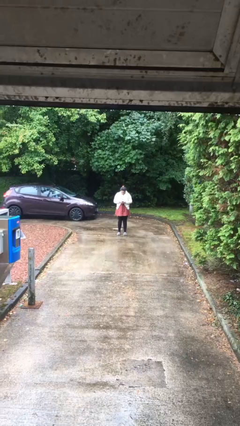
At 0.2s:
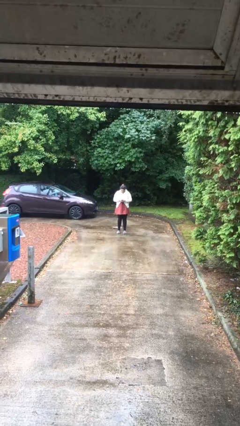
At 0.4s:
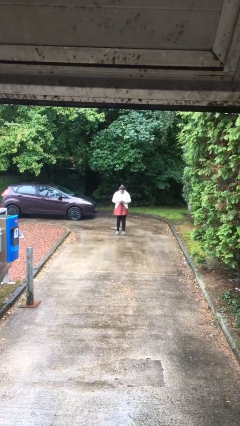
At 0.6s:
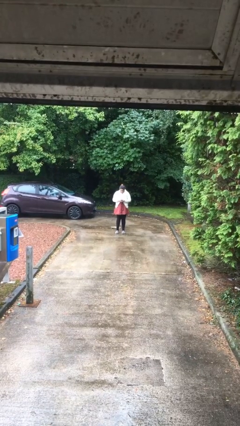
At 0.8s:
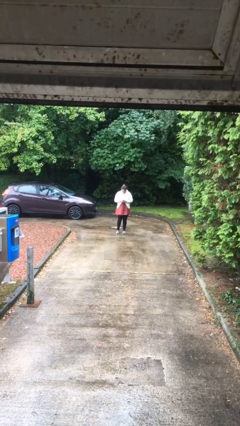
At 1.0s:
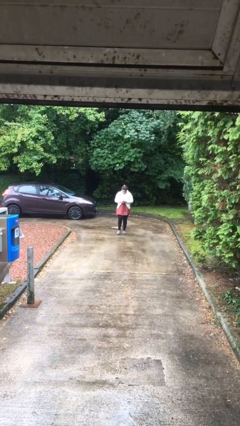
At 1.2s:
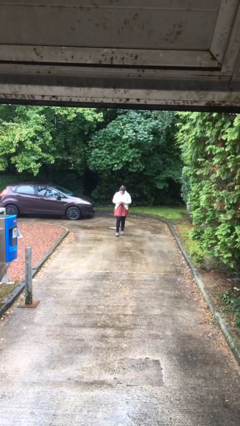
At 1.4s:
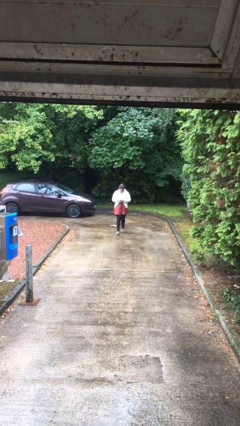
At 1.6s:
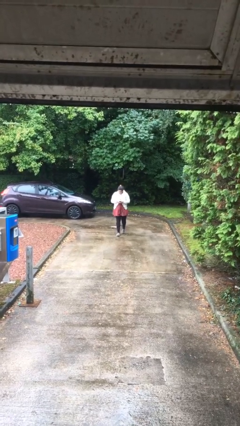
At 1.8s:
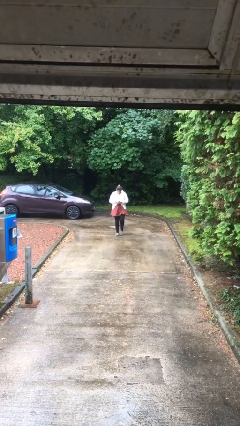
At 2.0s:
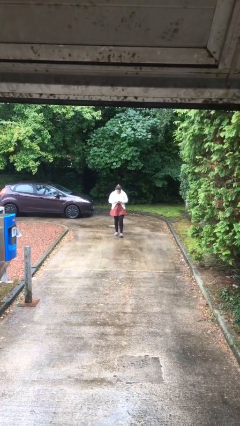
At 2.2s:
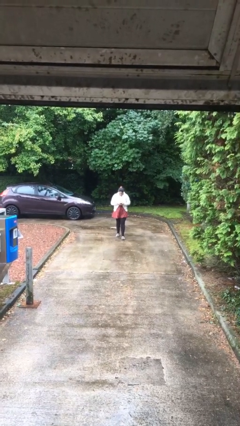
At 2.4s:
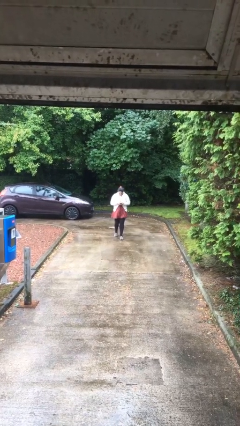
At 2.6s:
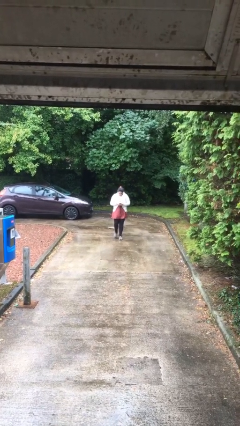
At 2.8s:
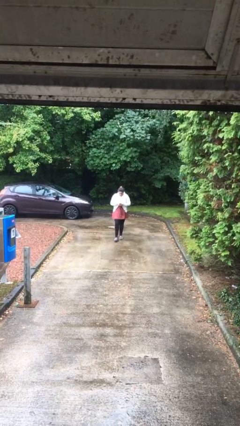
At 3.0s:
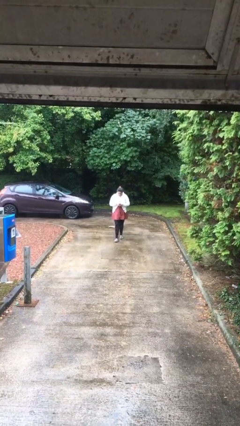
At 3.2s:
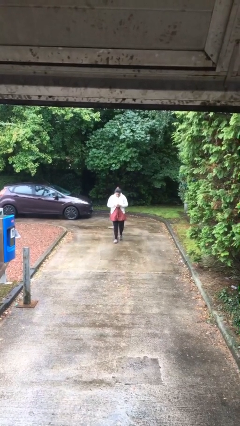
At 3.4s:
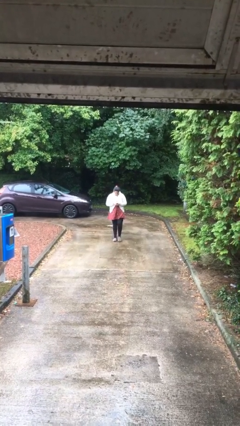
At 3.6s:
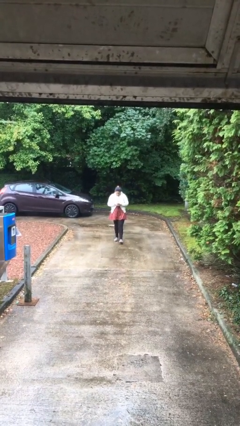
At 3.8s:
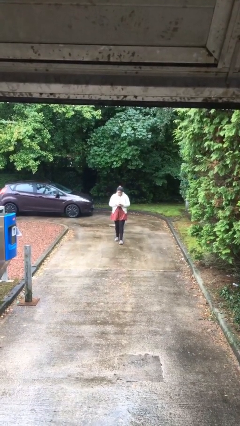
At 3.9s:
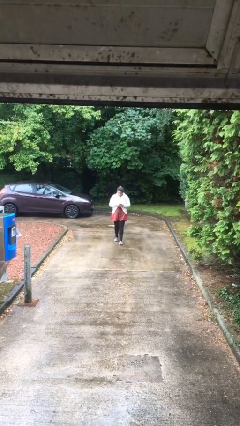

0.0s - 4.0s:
person texts on phone

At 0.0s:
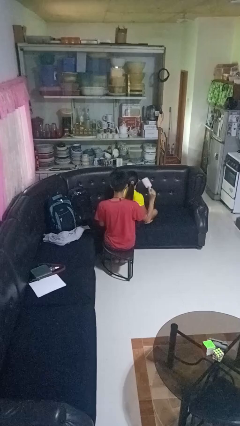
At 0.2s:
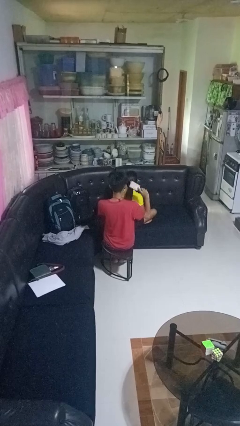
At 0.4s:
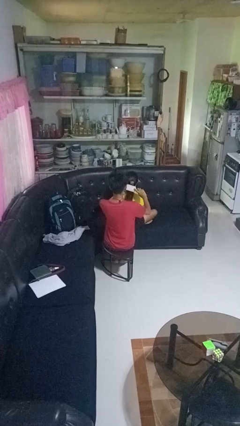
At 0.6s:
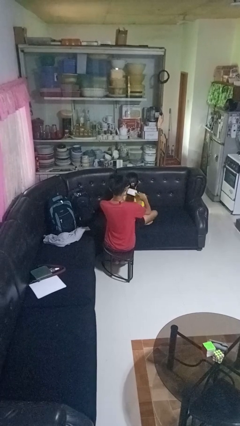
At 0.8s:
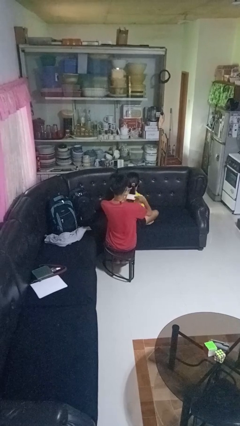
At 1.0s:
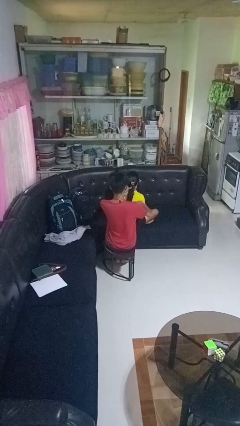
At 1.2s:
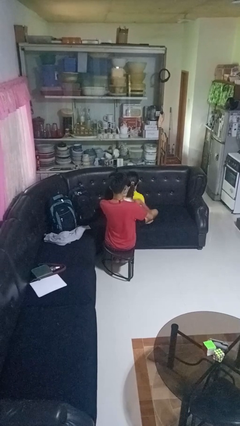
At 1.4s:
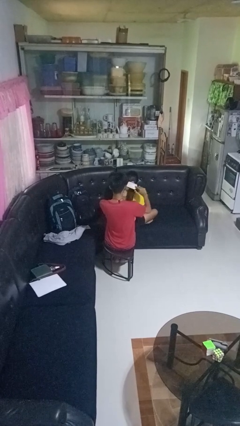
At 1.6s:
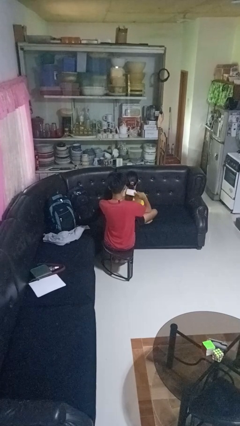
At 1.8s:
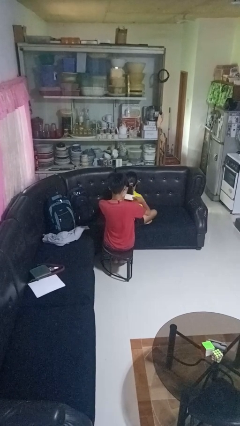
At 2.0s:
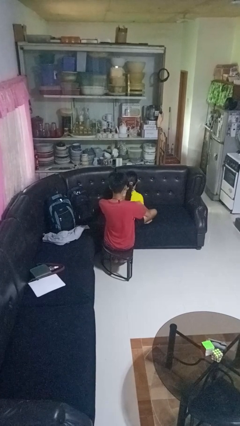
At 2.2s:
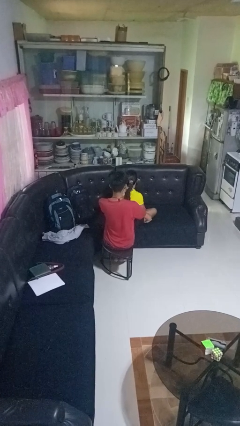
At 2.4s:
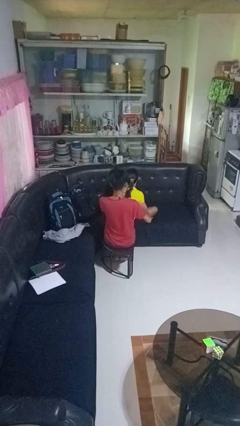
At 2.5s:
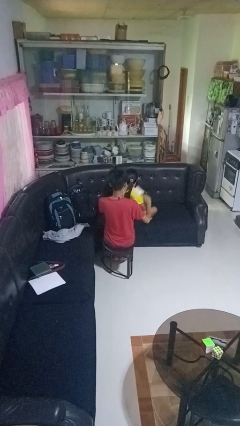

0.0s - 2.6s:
person brushes hair of person

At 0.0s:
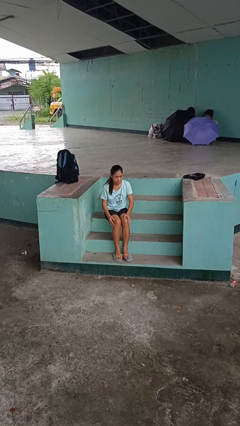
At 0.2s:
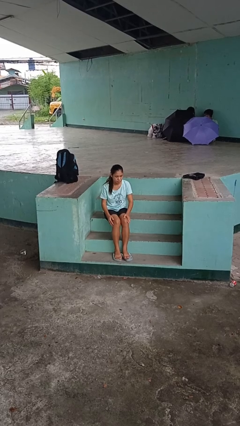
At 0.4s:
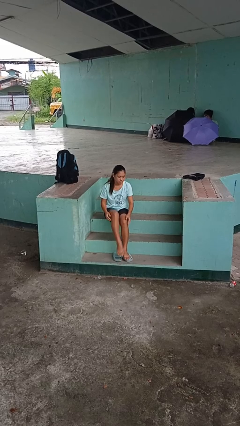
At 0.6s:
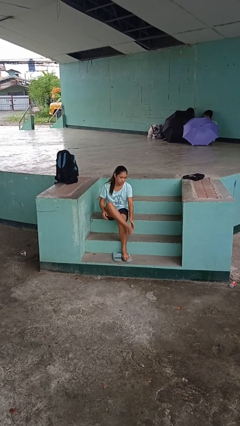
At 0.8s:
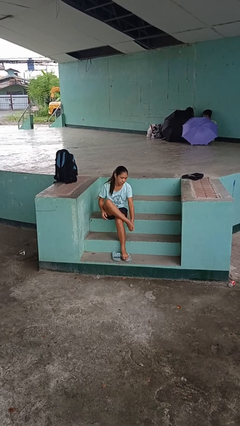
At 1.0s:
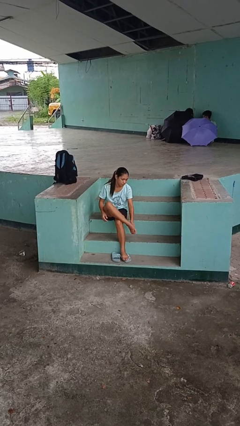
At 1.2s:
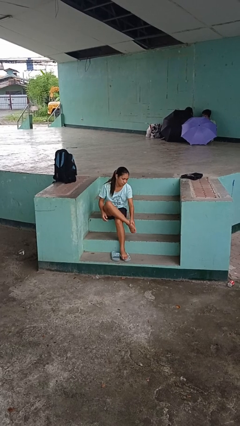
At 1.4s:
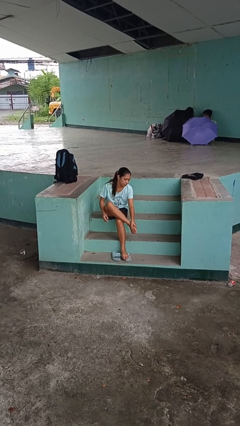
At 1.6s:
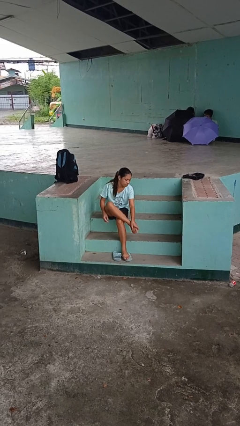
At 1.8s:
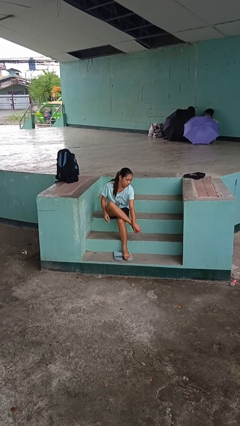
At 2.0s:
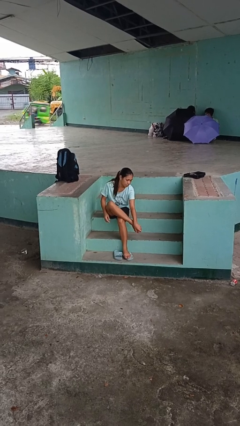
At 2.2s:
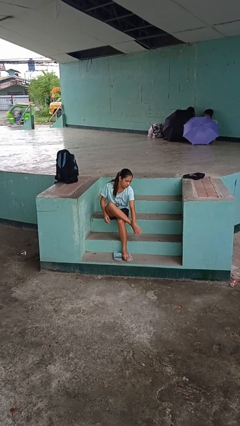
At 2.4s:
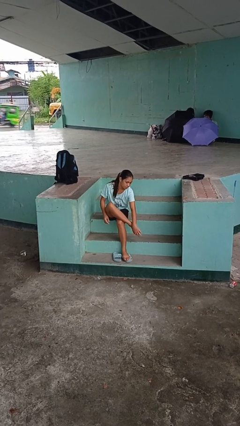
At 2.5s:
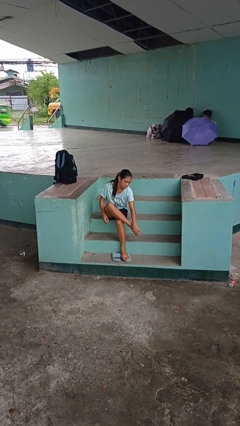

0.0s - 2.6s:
person rubs foot

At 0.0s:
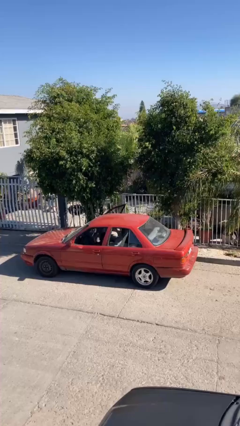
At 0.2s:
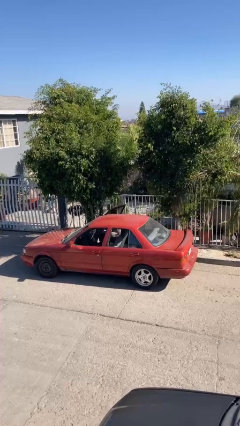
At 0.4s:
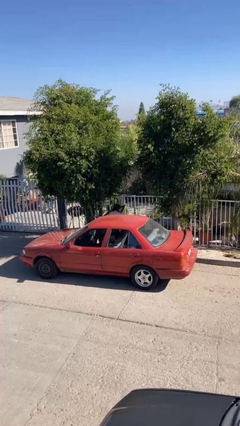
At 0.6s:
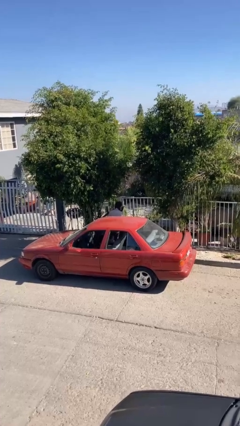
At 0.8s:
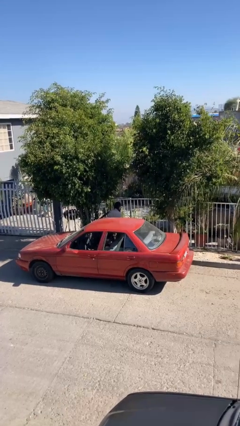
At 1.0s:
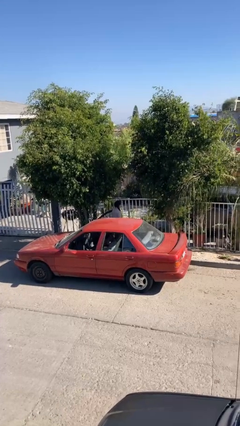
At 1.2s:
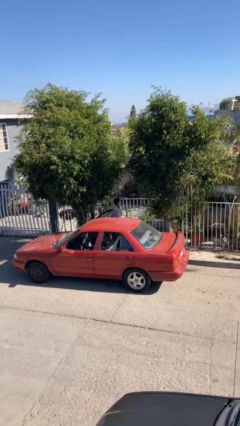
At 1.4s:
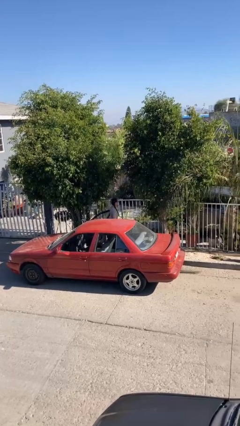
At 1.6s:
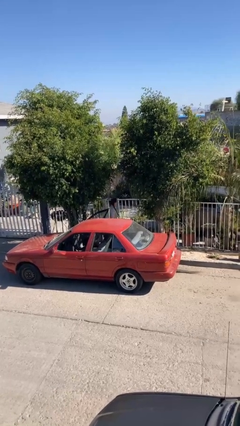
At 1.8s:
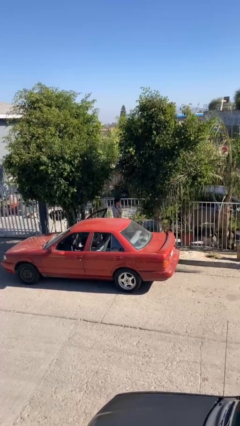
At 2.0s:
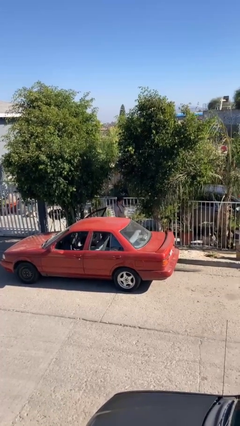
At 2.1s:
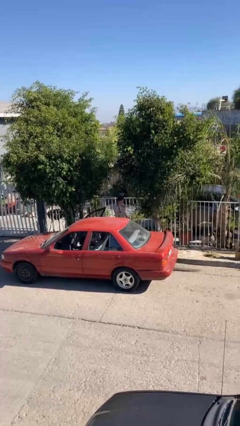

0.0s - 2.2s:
person exits car

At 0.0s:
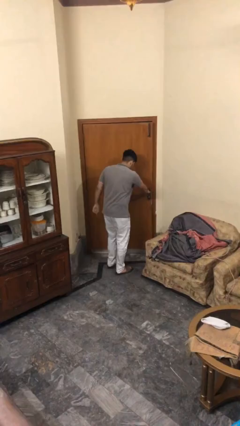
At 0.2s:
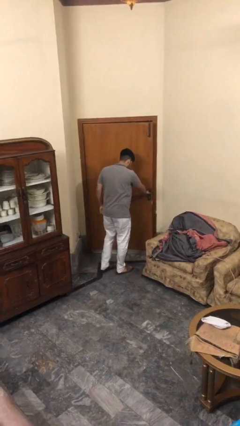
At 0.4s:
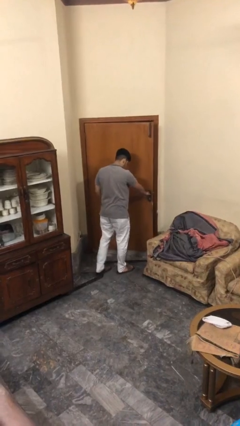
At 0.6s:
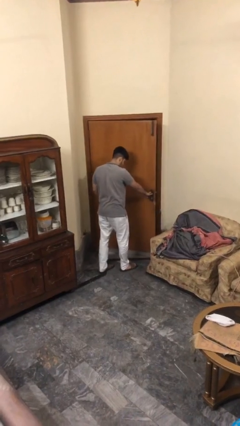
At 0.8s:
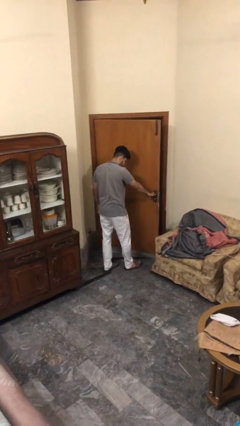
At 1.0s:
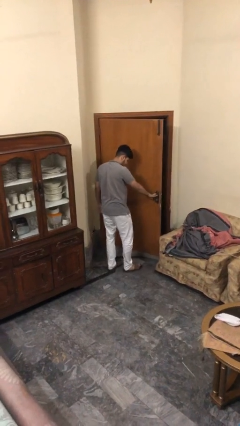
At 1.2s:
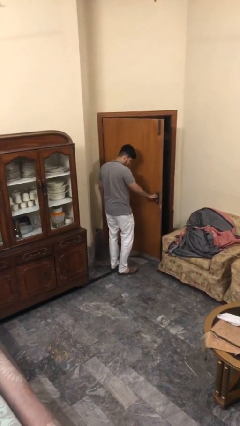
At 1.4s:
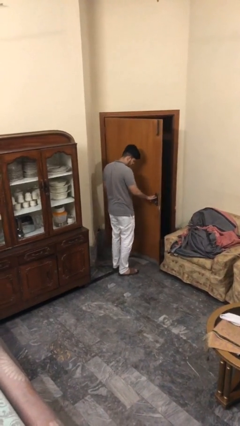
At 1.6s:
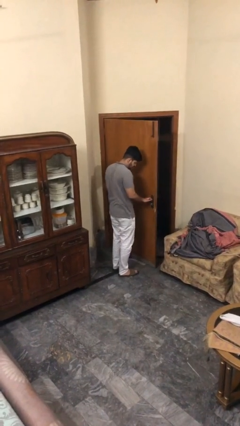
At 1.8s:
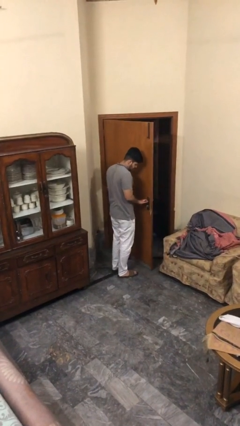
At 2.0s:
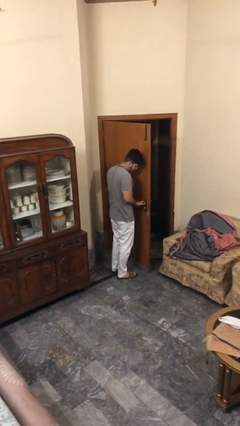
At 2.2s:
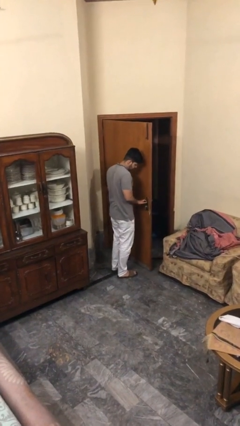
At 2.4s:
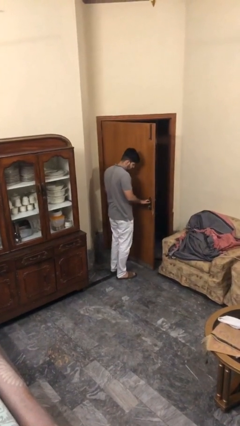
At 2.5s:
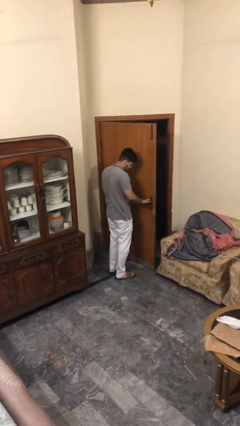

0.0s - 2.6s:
person opens facility door

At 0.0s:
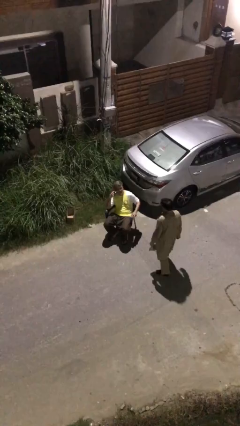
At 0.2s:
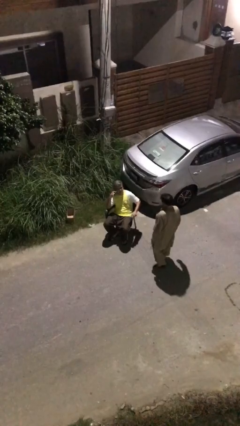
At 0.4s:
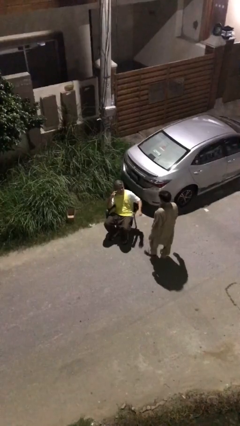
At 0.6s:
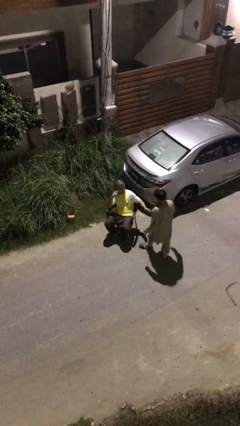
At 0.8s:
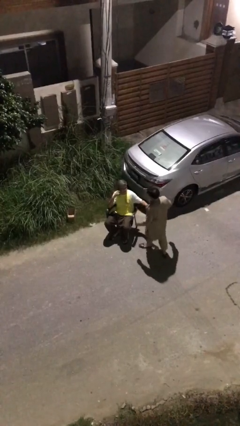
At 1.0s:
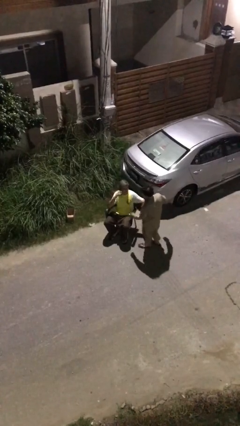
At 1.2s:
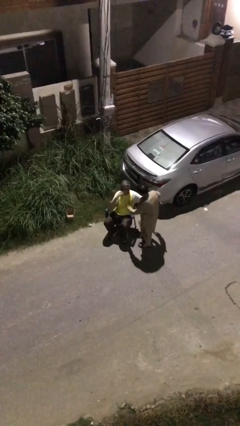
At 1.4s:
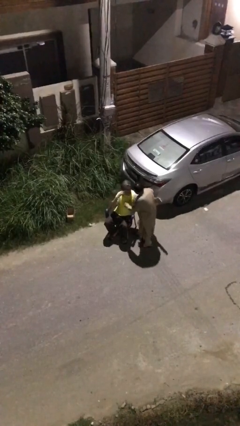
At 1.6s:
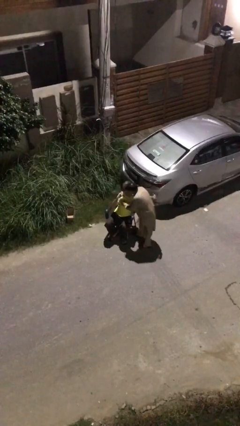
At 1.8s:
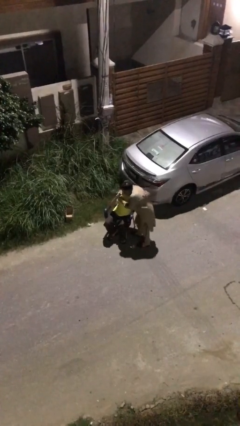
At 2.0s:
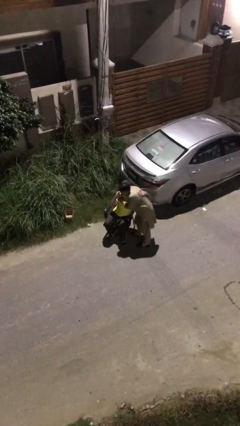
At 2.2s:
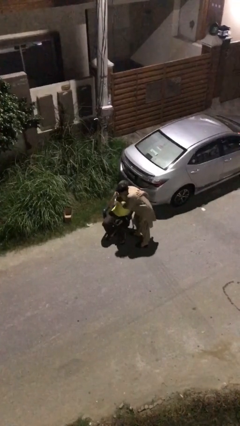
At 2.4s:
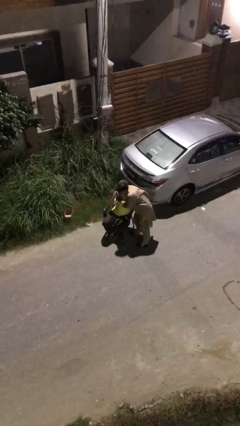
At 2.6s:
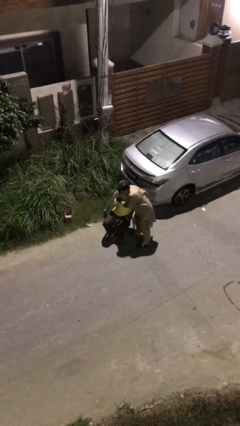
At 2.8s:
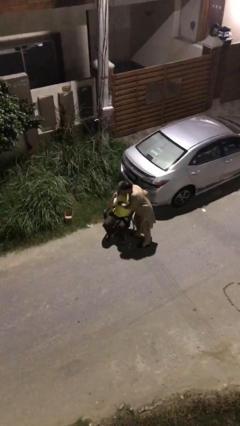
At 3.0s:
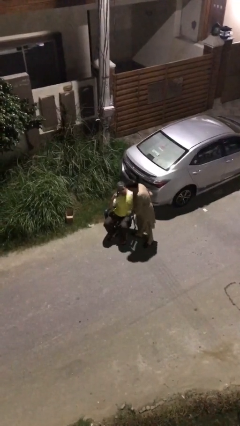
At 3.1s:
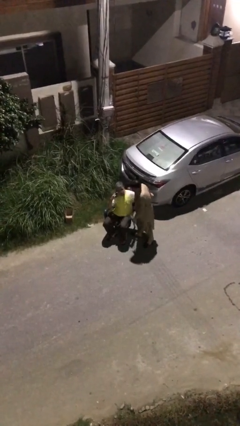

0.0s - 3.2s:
person embraces person

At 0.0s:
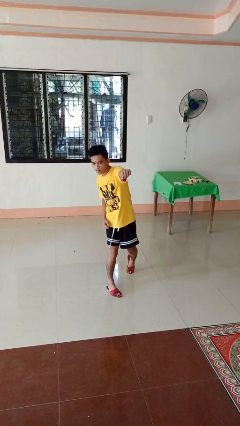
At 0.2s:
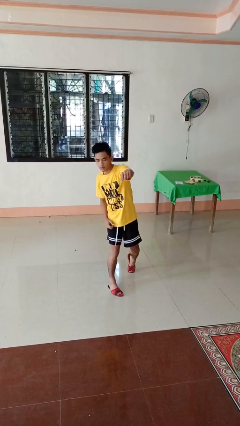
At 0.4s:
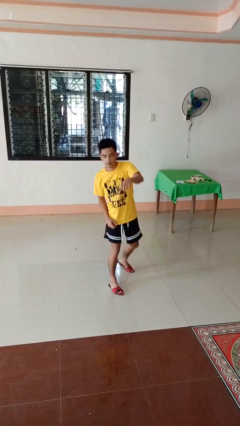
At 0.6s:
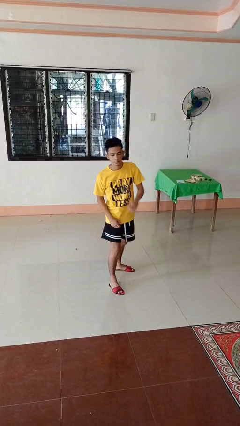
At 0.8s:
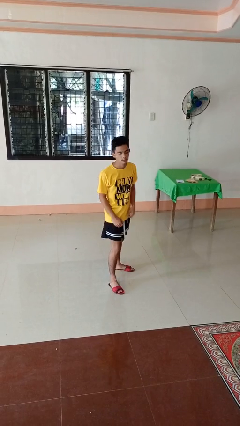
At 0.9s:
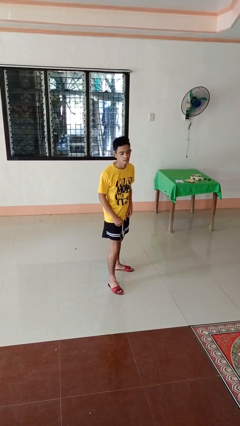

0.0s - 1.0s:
person punches
